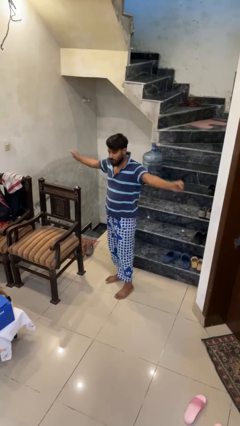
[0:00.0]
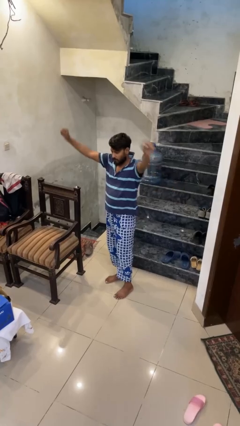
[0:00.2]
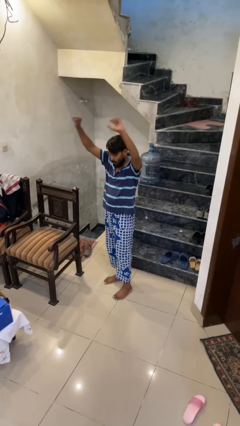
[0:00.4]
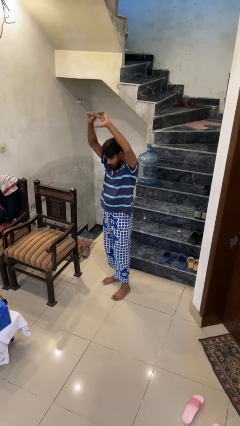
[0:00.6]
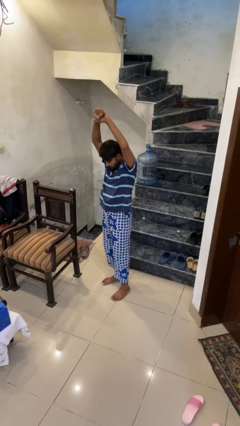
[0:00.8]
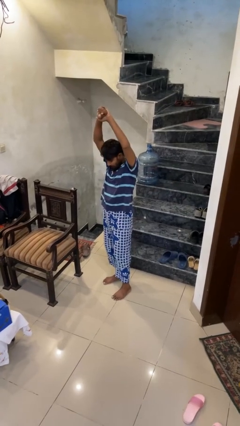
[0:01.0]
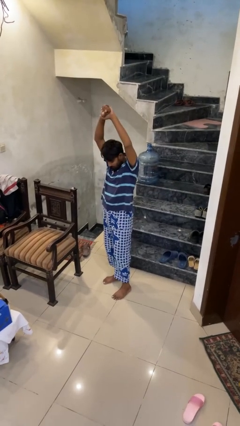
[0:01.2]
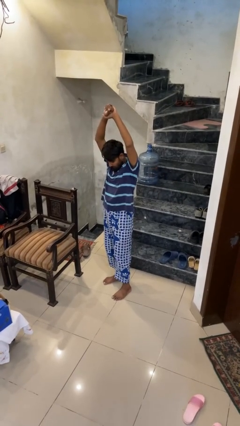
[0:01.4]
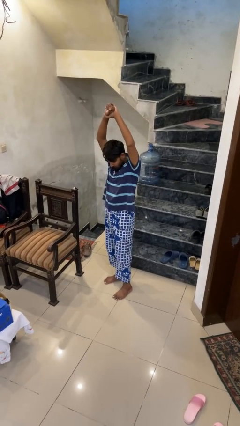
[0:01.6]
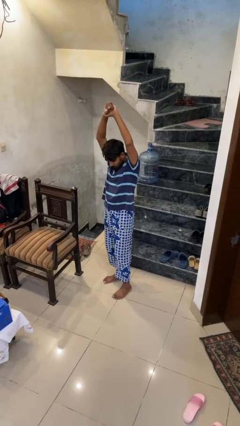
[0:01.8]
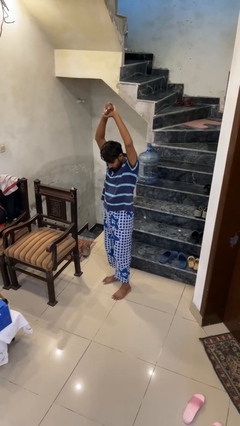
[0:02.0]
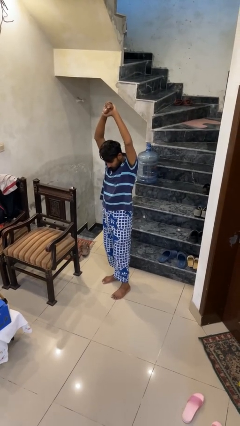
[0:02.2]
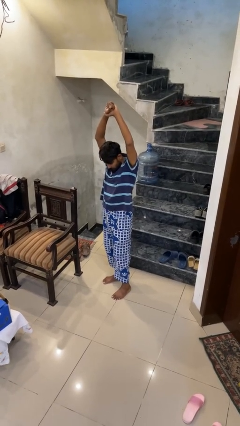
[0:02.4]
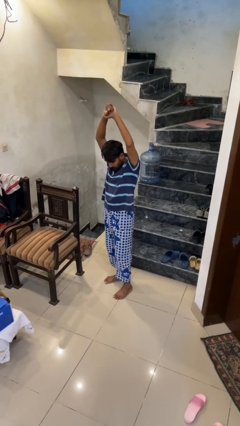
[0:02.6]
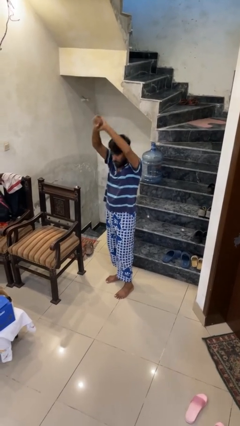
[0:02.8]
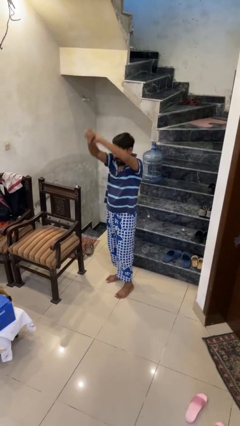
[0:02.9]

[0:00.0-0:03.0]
person stretches arms over head

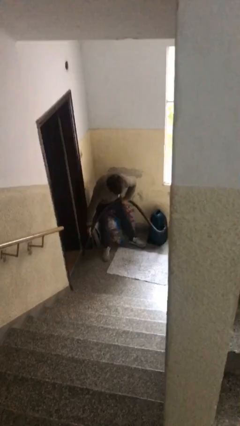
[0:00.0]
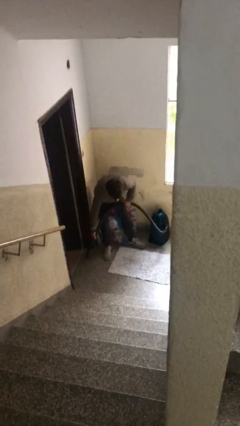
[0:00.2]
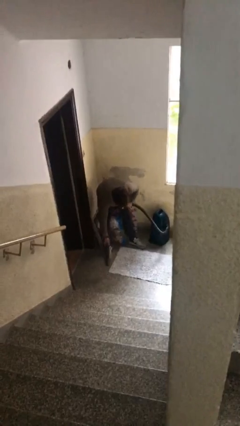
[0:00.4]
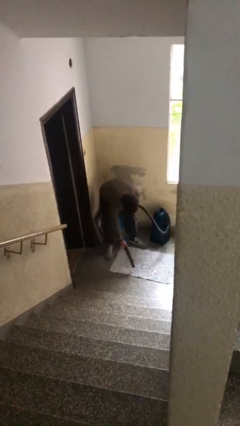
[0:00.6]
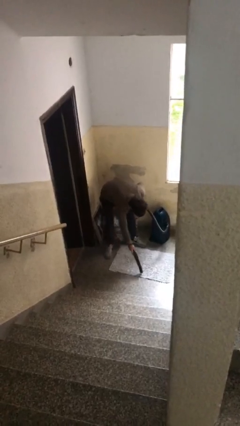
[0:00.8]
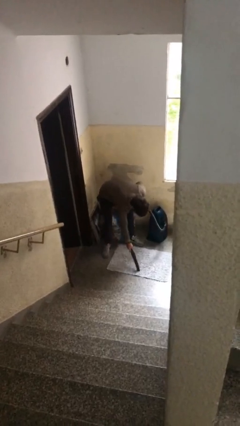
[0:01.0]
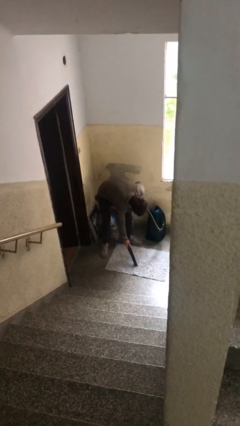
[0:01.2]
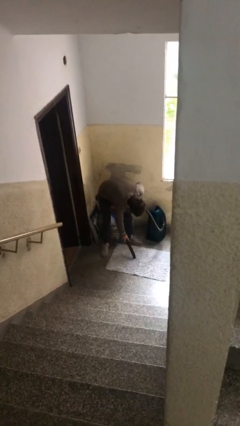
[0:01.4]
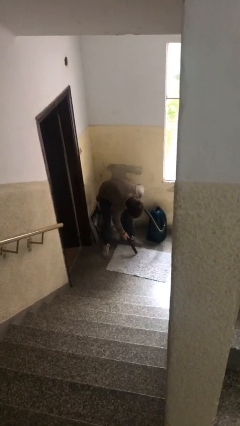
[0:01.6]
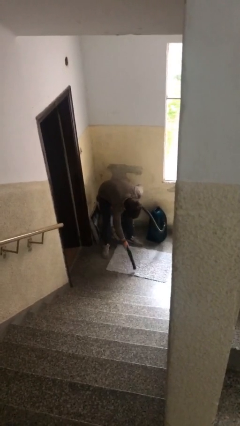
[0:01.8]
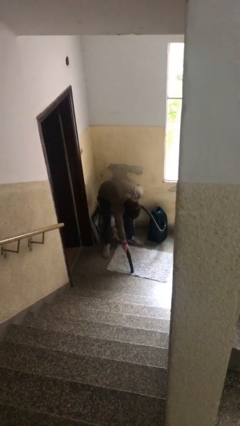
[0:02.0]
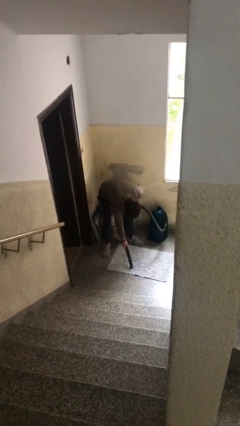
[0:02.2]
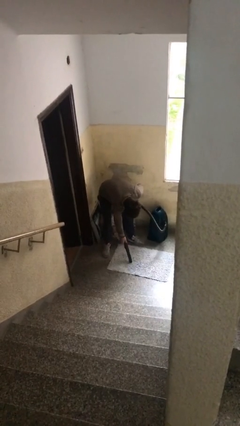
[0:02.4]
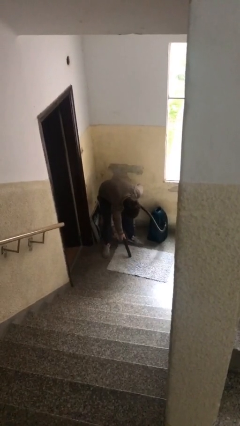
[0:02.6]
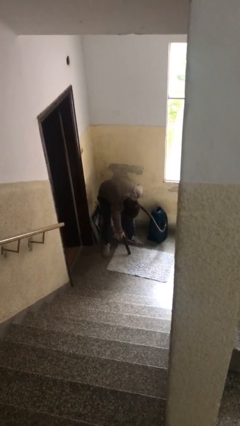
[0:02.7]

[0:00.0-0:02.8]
person vacuums carpet

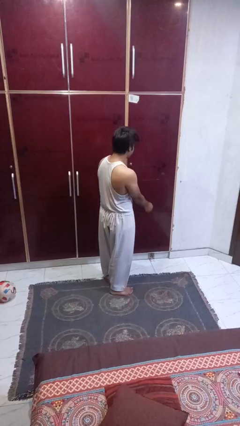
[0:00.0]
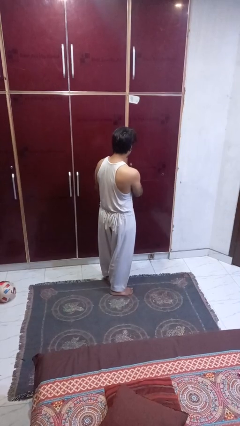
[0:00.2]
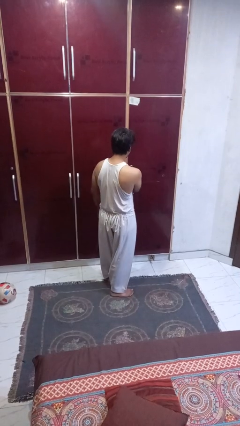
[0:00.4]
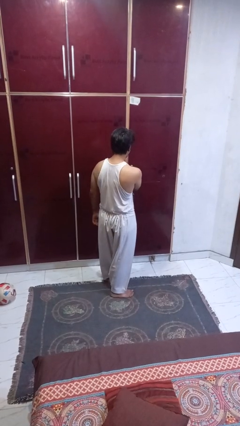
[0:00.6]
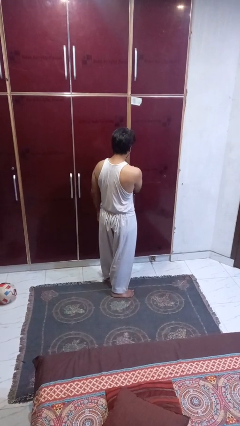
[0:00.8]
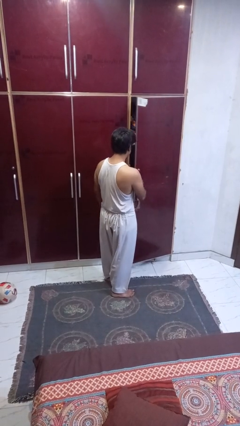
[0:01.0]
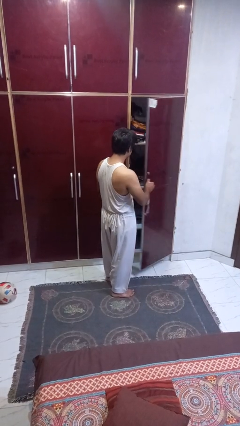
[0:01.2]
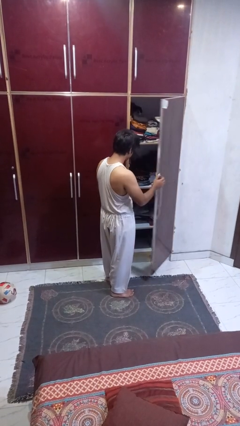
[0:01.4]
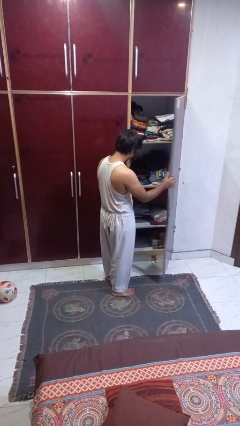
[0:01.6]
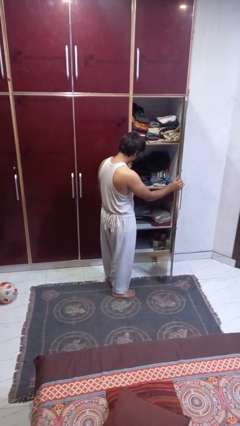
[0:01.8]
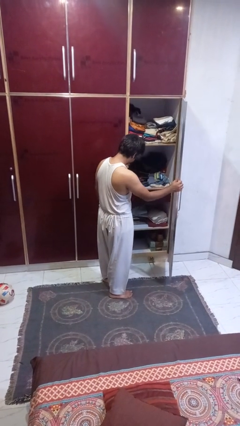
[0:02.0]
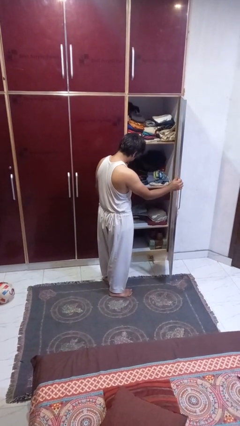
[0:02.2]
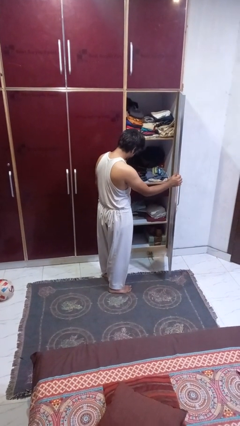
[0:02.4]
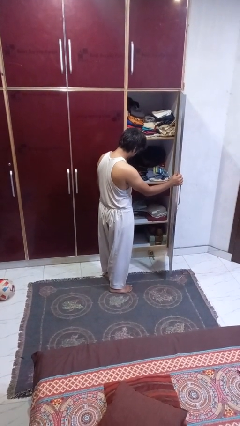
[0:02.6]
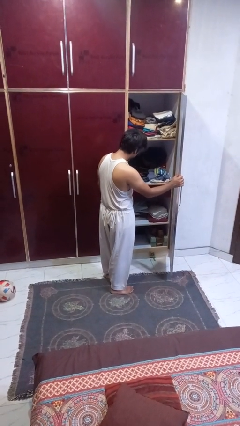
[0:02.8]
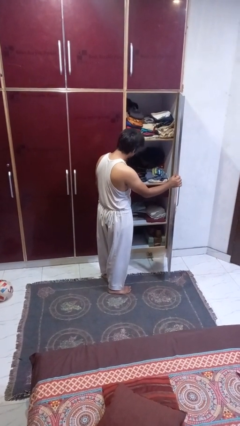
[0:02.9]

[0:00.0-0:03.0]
person opens closet door

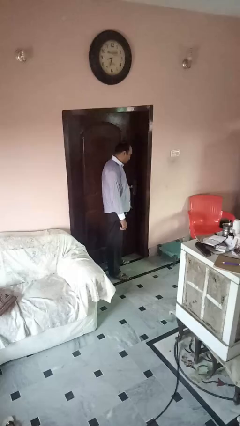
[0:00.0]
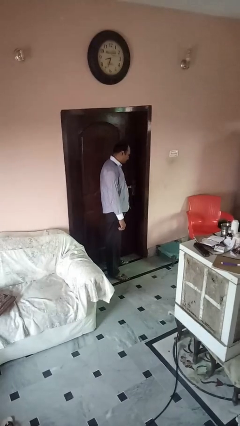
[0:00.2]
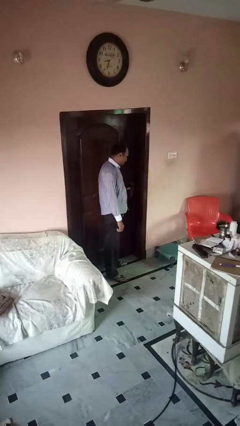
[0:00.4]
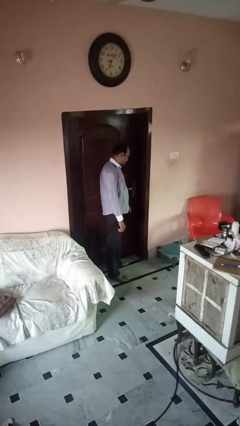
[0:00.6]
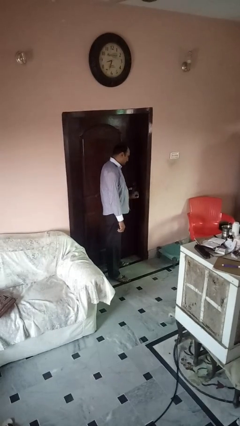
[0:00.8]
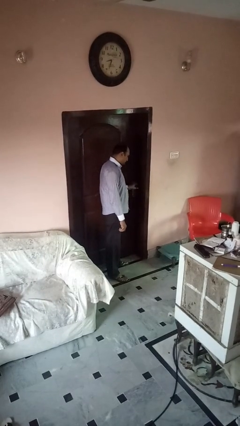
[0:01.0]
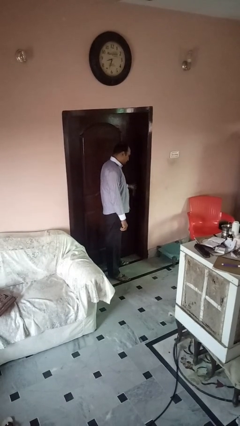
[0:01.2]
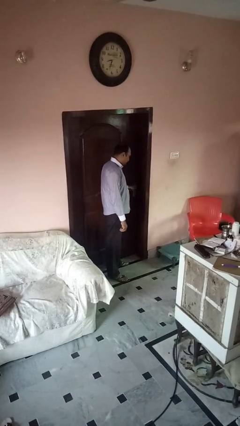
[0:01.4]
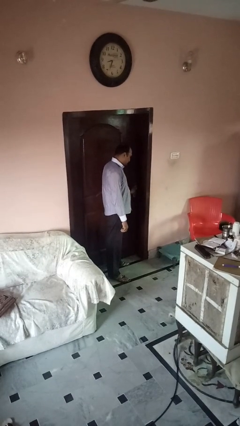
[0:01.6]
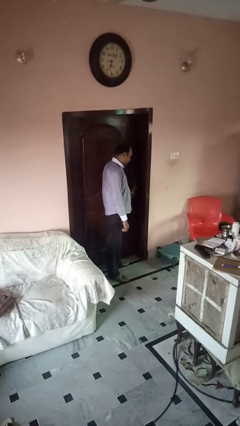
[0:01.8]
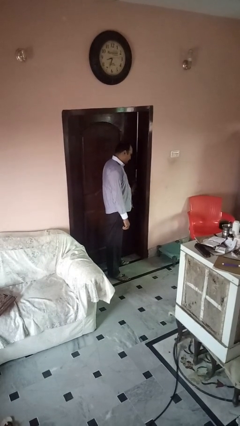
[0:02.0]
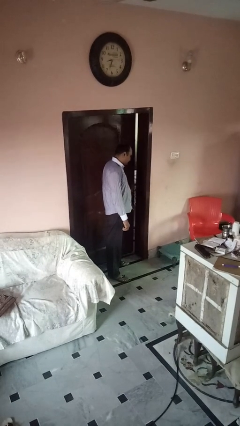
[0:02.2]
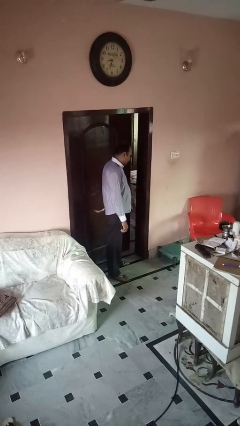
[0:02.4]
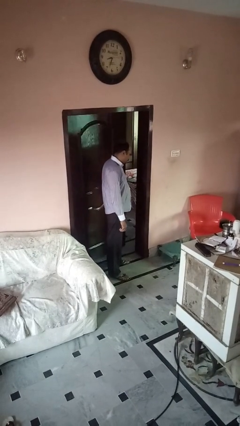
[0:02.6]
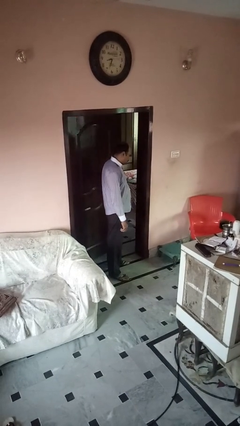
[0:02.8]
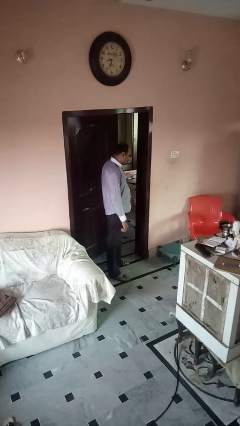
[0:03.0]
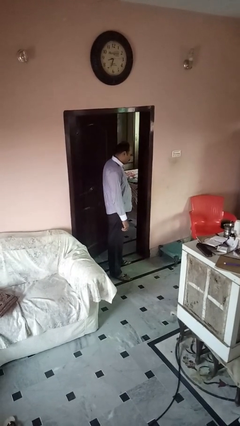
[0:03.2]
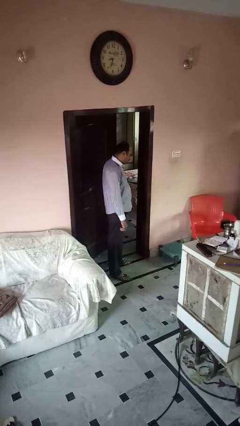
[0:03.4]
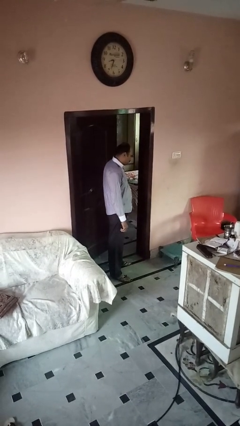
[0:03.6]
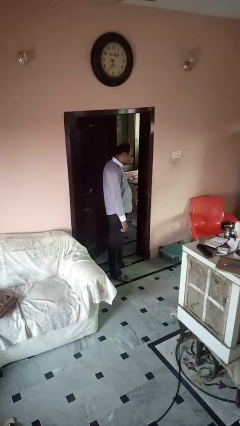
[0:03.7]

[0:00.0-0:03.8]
person opens gate

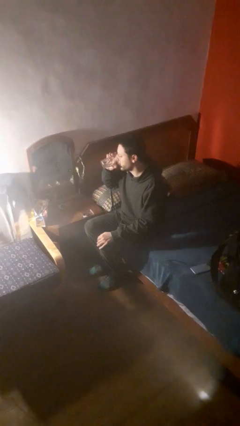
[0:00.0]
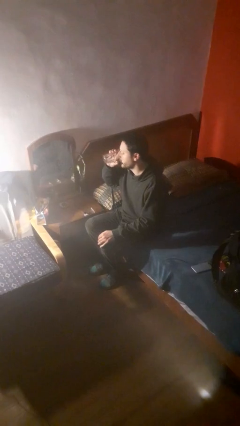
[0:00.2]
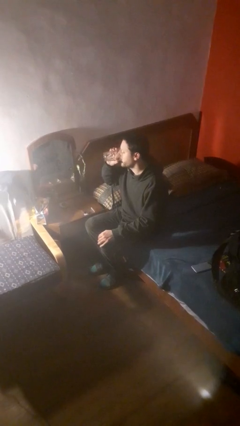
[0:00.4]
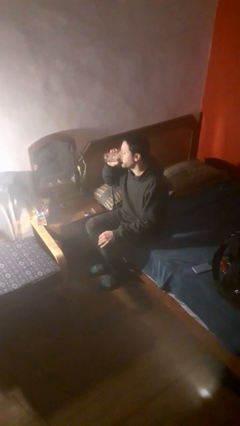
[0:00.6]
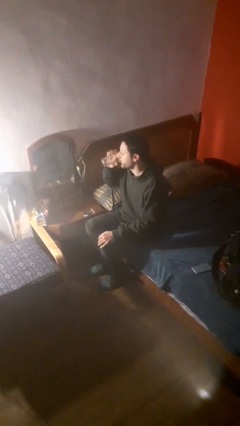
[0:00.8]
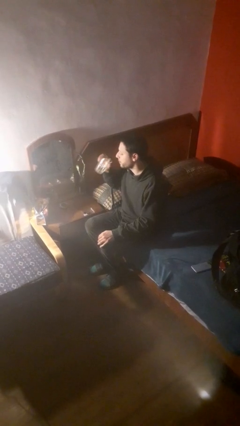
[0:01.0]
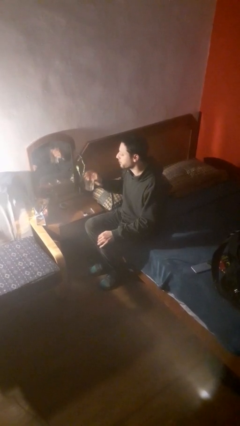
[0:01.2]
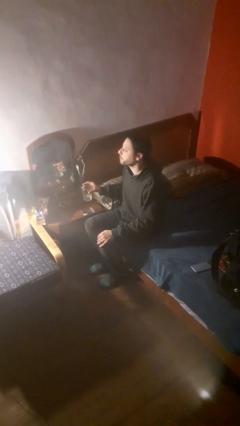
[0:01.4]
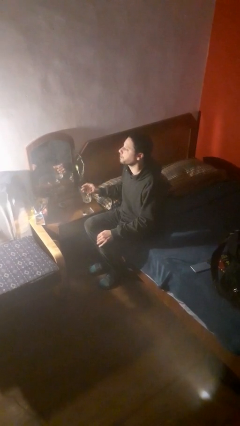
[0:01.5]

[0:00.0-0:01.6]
person drinks from cup

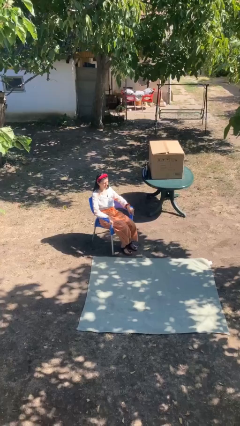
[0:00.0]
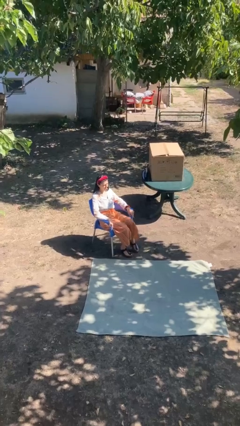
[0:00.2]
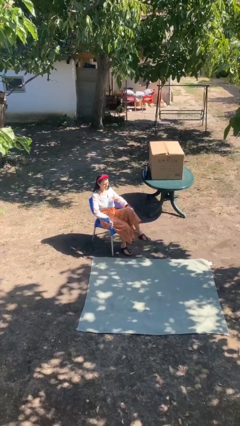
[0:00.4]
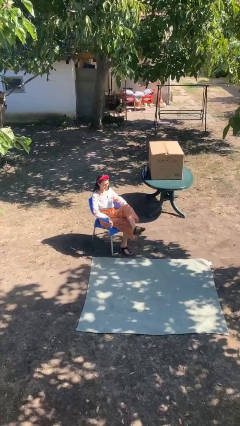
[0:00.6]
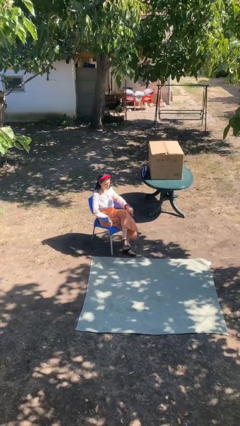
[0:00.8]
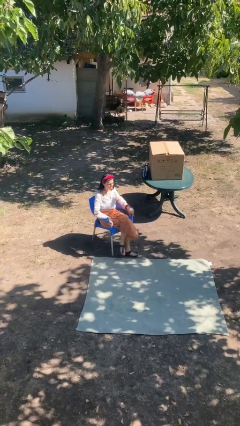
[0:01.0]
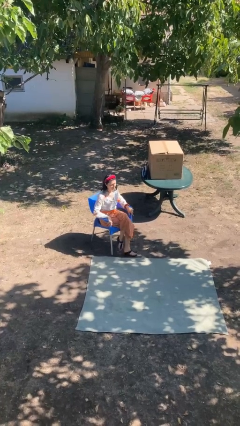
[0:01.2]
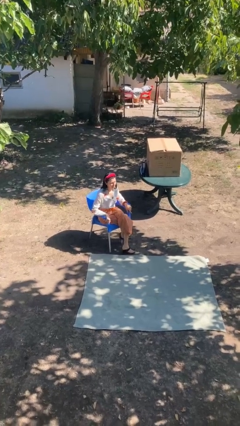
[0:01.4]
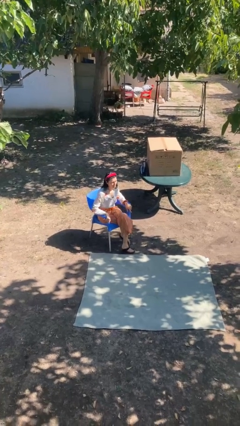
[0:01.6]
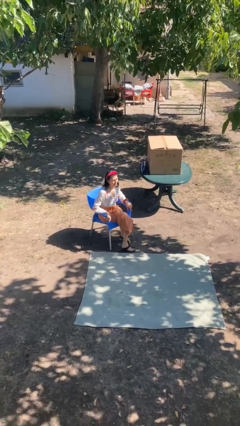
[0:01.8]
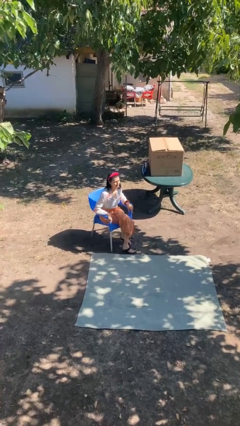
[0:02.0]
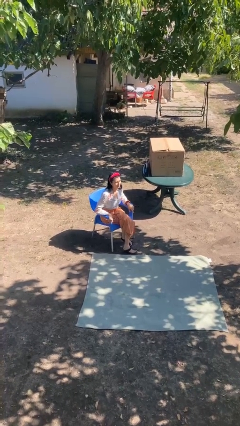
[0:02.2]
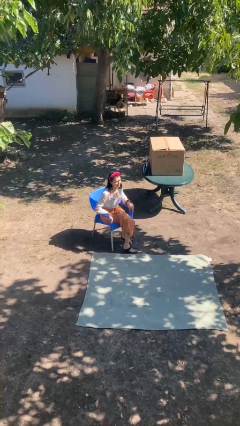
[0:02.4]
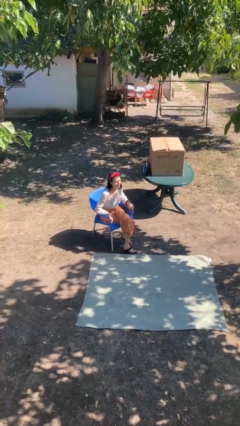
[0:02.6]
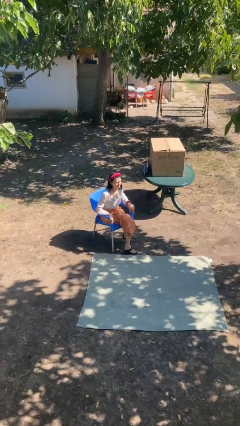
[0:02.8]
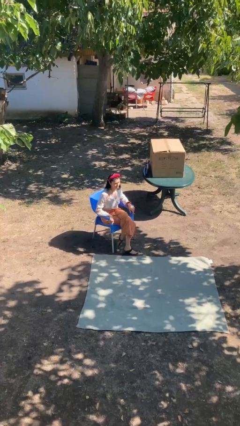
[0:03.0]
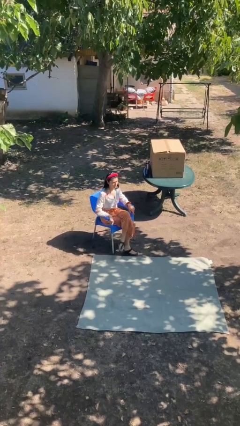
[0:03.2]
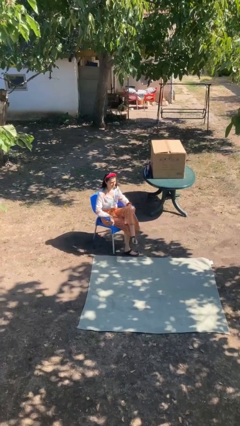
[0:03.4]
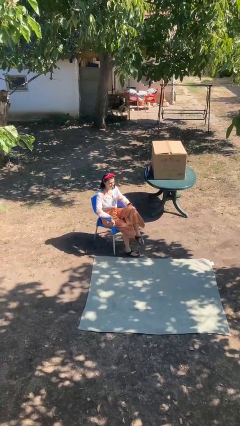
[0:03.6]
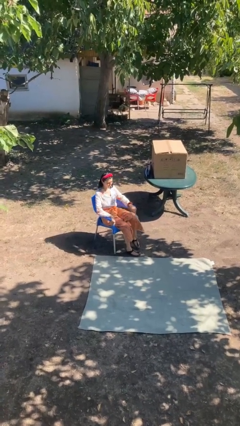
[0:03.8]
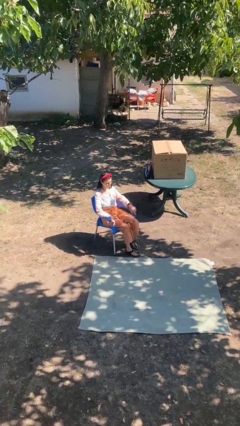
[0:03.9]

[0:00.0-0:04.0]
person crosses legs
